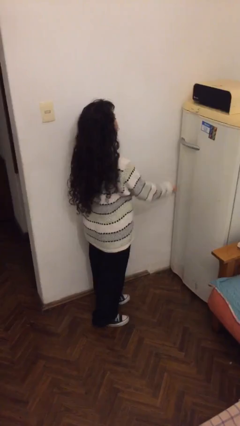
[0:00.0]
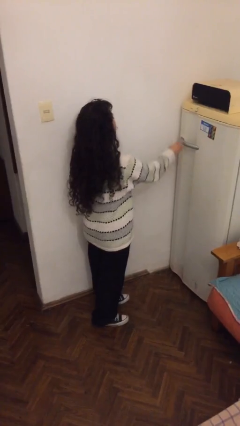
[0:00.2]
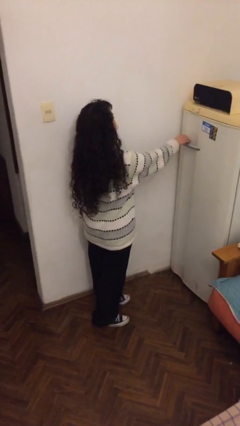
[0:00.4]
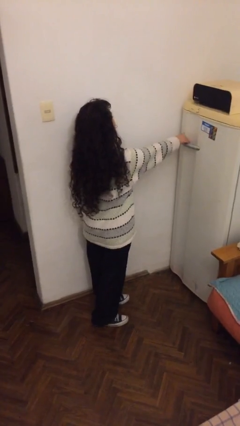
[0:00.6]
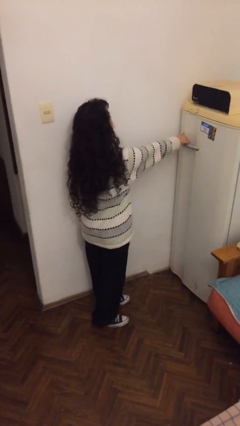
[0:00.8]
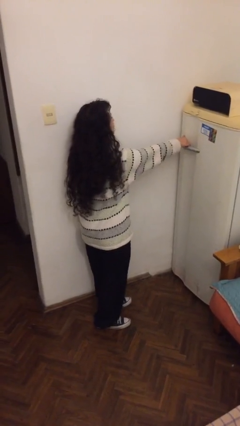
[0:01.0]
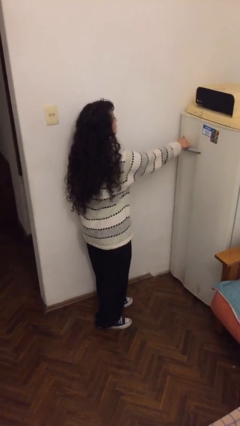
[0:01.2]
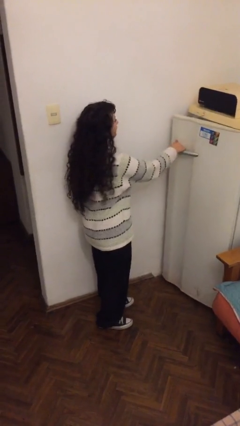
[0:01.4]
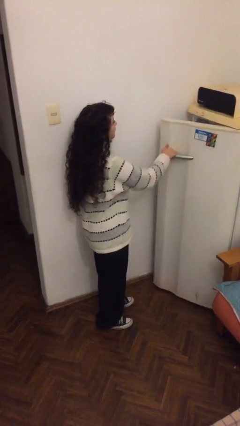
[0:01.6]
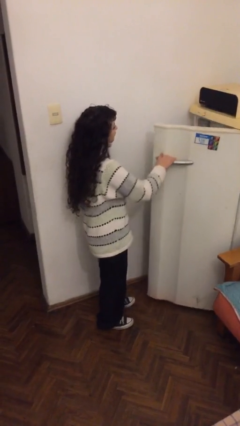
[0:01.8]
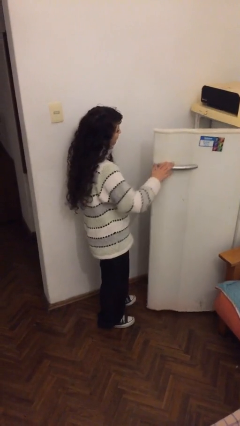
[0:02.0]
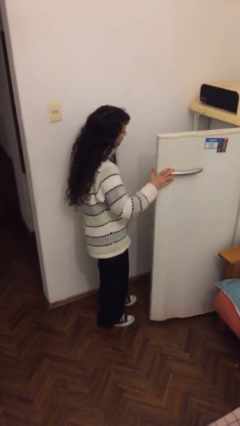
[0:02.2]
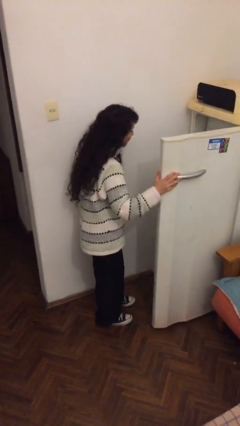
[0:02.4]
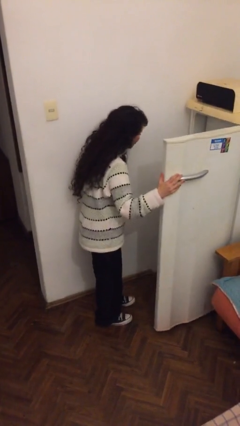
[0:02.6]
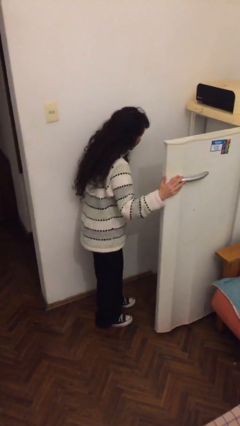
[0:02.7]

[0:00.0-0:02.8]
person opens refrigerator

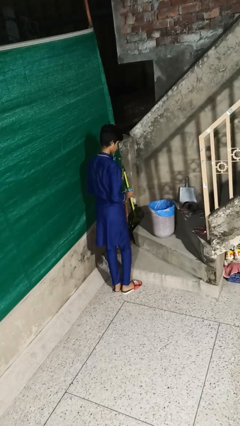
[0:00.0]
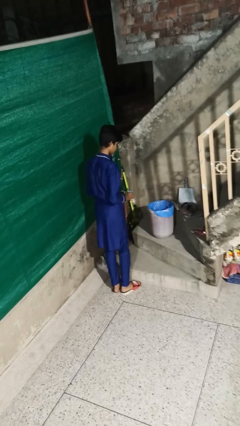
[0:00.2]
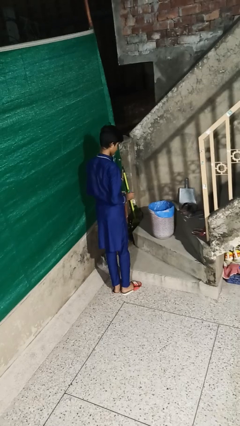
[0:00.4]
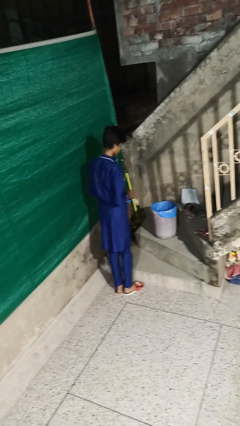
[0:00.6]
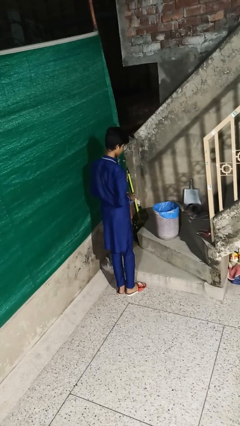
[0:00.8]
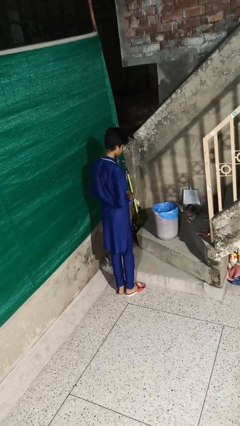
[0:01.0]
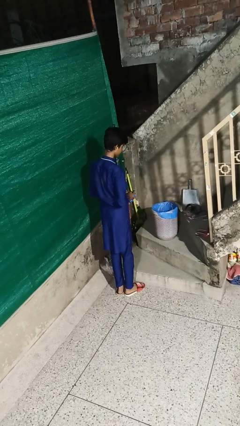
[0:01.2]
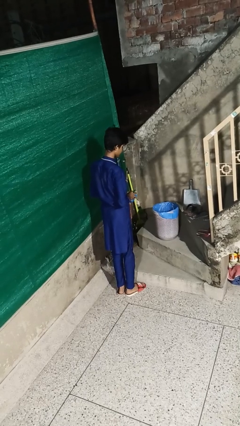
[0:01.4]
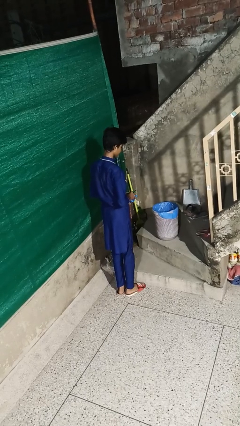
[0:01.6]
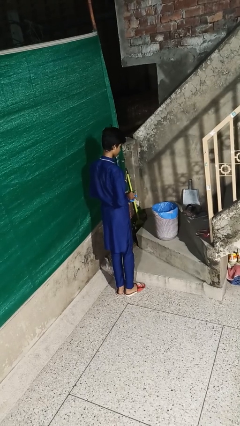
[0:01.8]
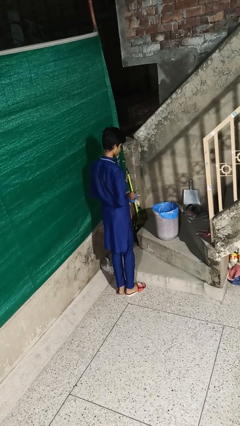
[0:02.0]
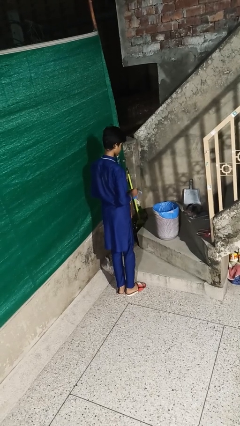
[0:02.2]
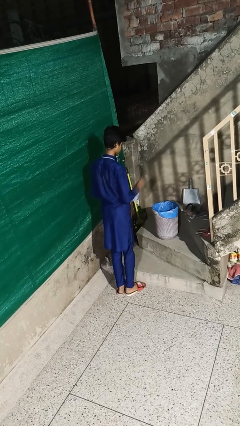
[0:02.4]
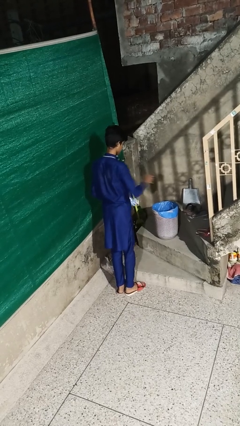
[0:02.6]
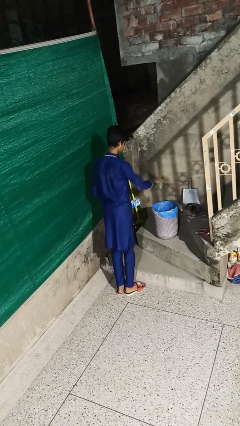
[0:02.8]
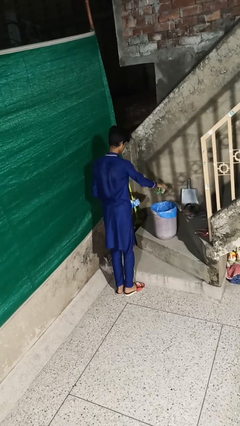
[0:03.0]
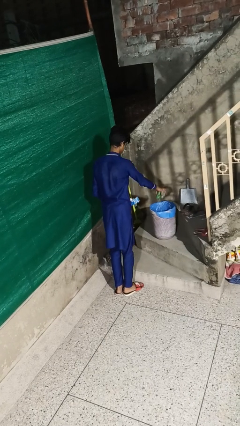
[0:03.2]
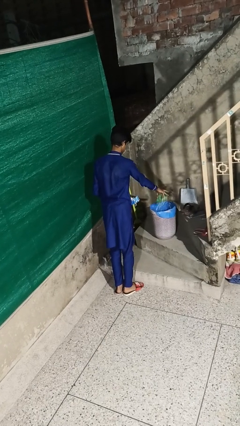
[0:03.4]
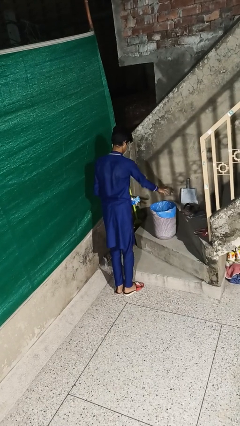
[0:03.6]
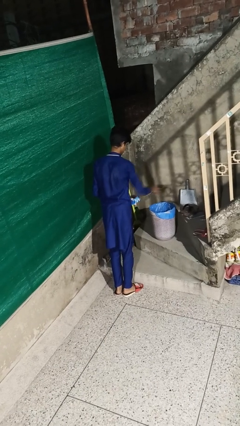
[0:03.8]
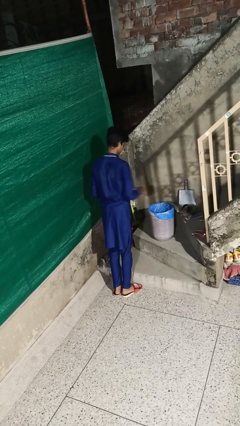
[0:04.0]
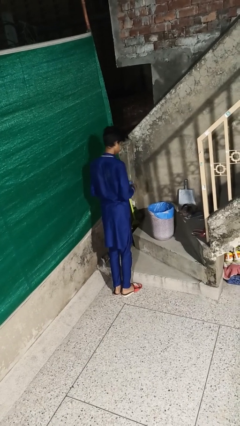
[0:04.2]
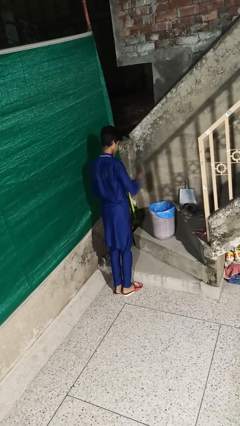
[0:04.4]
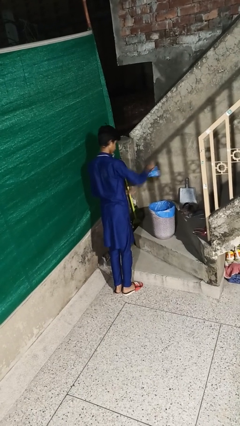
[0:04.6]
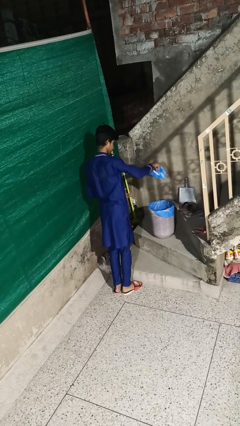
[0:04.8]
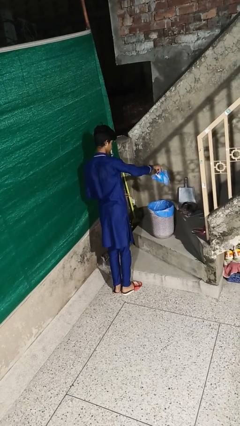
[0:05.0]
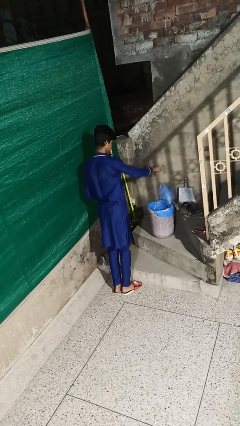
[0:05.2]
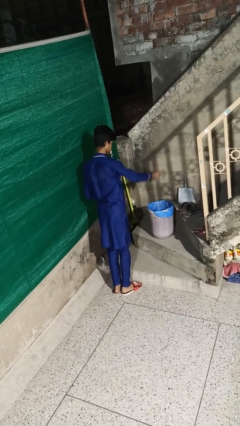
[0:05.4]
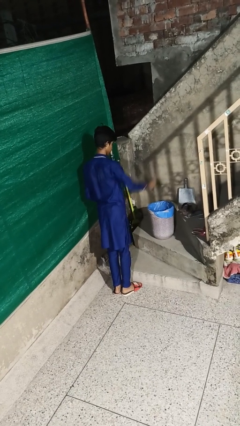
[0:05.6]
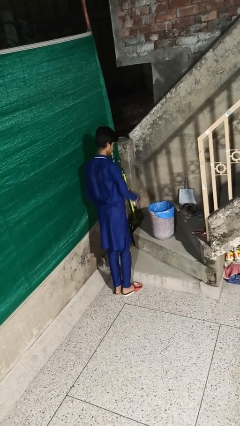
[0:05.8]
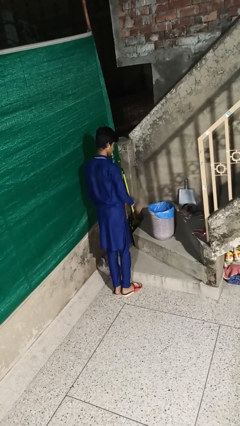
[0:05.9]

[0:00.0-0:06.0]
person discards trash

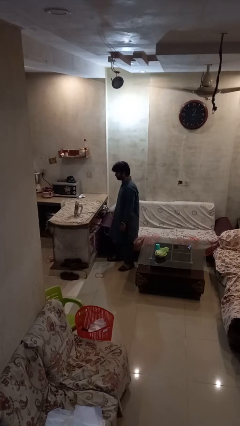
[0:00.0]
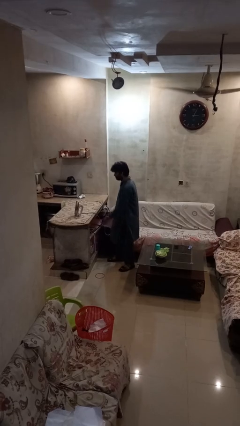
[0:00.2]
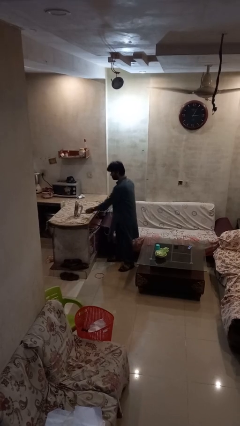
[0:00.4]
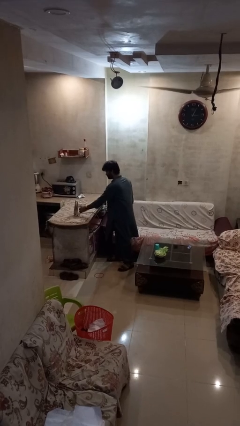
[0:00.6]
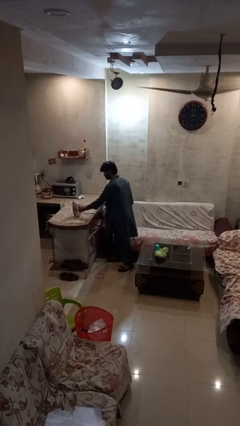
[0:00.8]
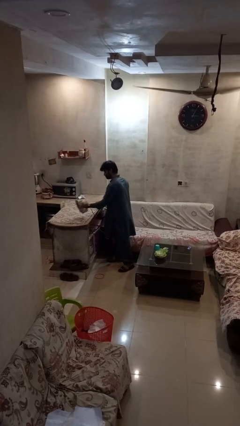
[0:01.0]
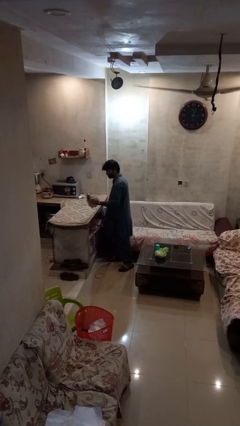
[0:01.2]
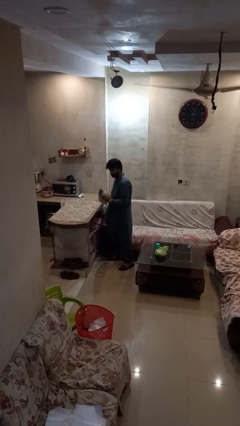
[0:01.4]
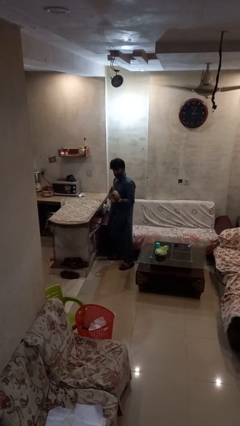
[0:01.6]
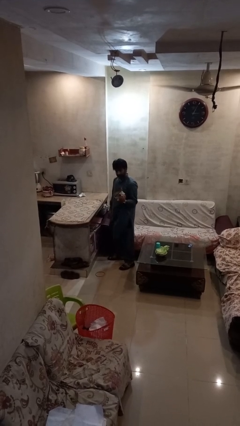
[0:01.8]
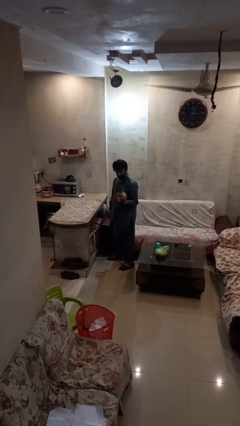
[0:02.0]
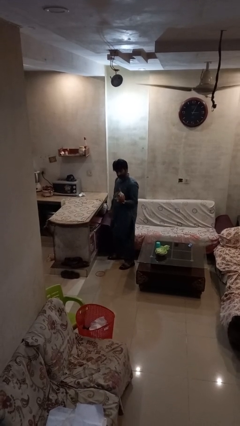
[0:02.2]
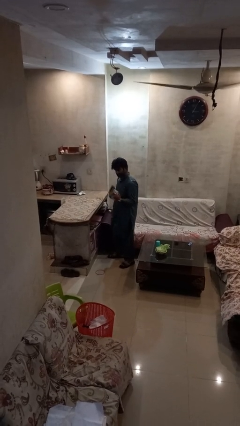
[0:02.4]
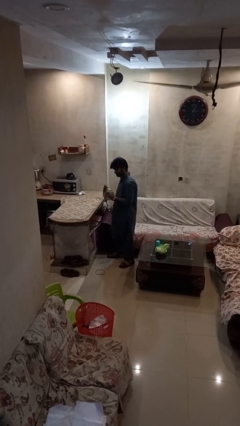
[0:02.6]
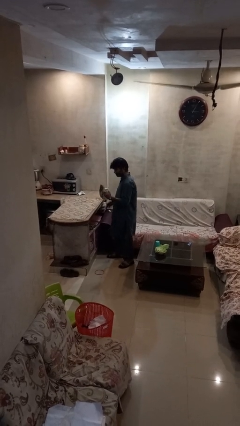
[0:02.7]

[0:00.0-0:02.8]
person picks up object from countertop

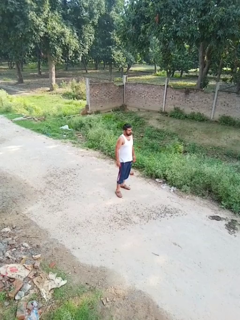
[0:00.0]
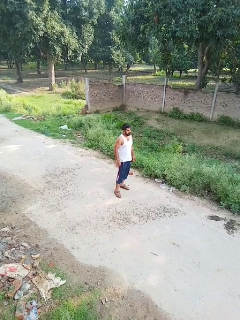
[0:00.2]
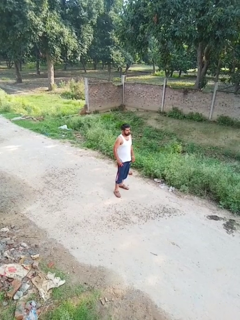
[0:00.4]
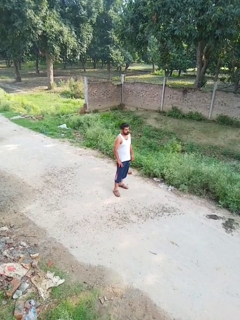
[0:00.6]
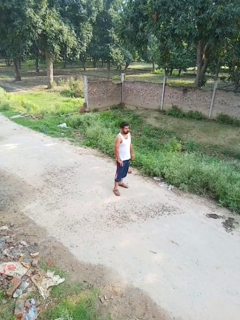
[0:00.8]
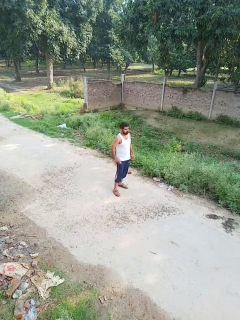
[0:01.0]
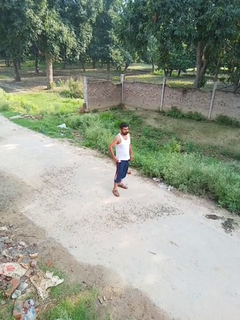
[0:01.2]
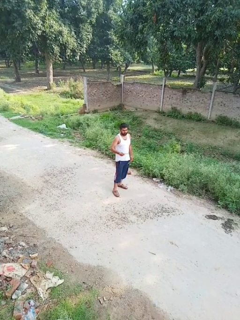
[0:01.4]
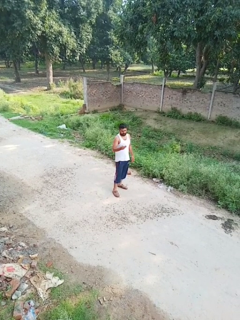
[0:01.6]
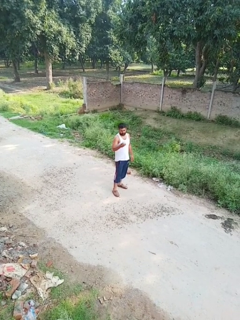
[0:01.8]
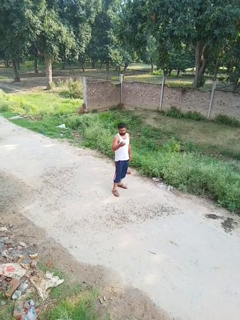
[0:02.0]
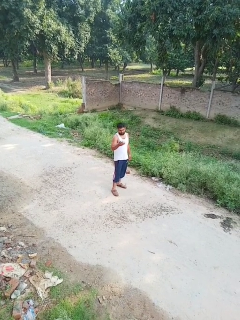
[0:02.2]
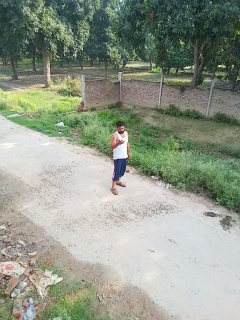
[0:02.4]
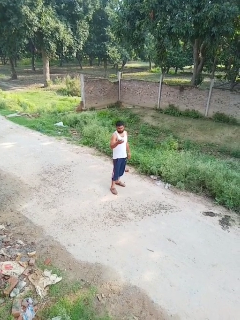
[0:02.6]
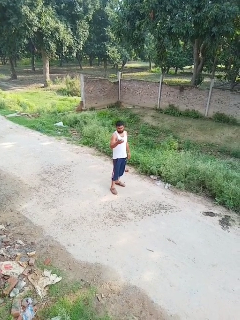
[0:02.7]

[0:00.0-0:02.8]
person takes phone from pocket

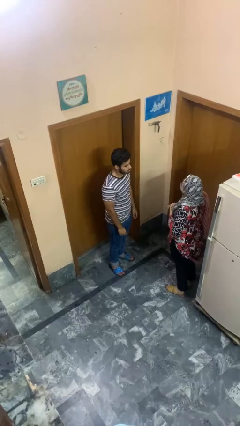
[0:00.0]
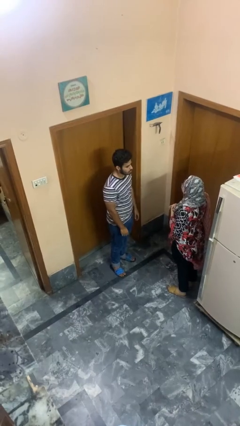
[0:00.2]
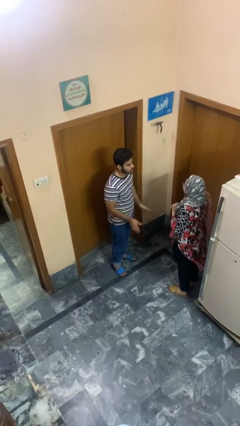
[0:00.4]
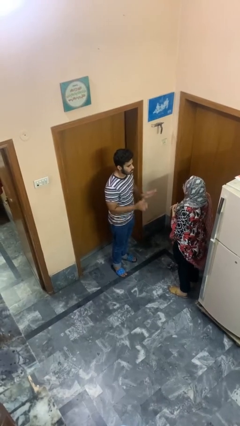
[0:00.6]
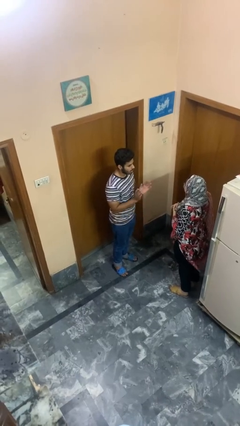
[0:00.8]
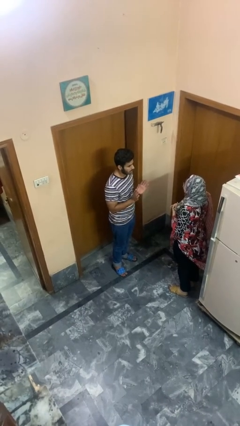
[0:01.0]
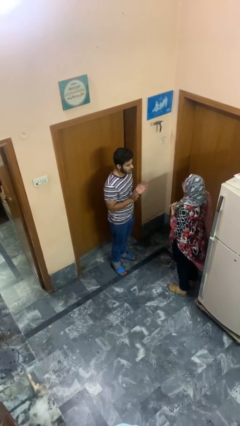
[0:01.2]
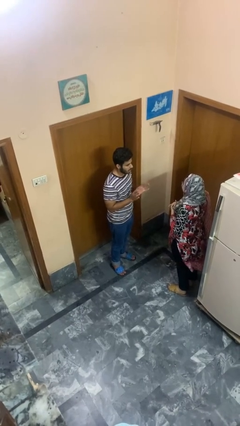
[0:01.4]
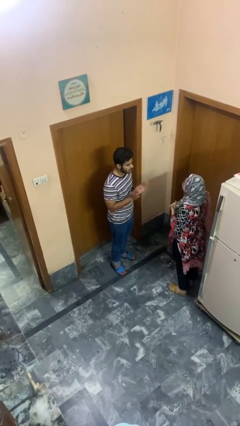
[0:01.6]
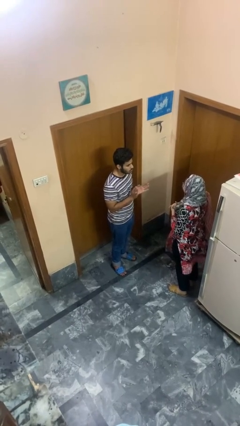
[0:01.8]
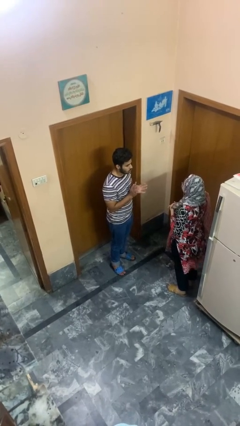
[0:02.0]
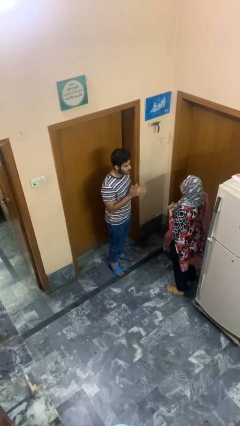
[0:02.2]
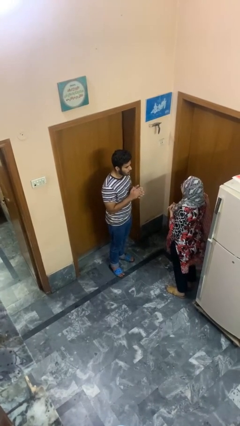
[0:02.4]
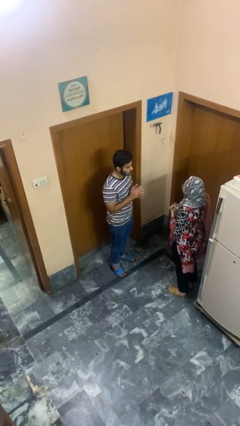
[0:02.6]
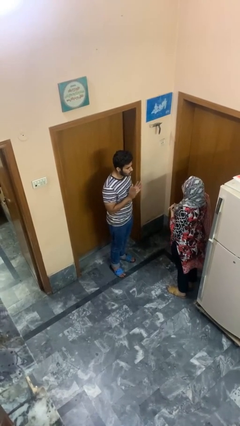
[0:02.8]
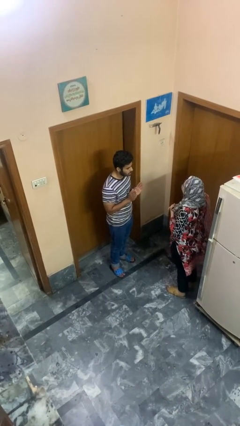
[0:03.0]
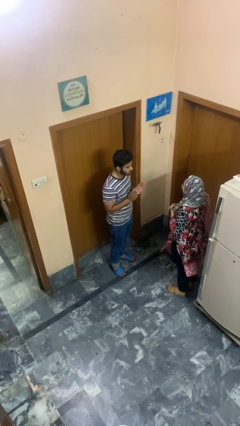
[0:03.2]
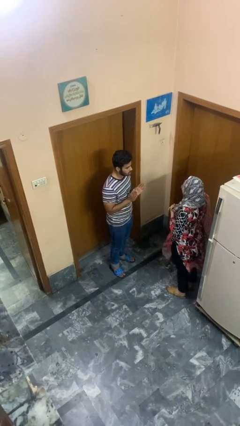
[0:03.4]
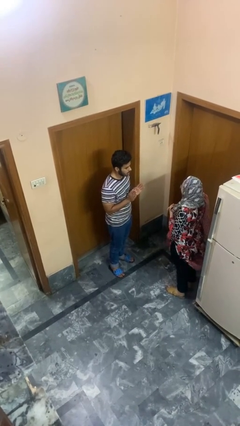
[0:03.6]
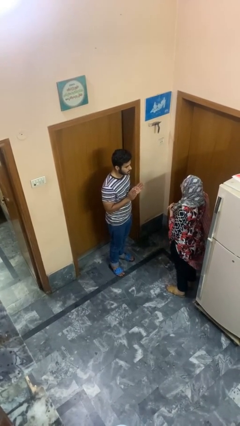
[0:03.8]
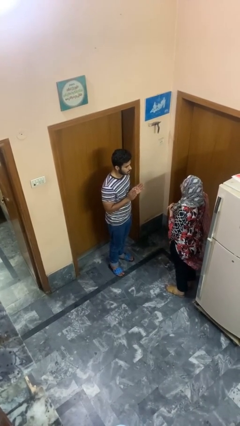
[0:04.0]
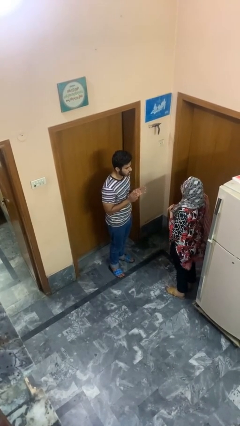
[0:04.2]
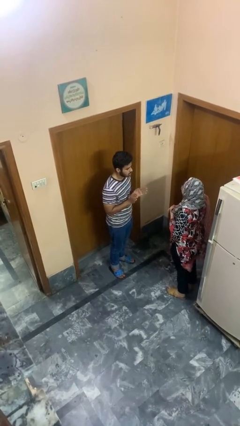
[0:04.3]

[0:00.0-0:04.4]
person talks to person
